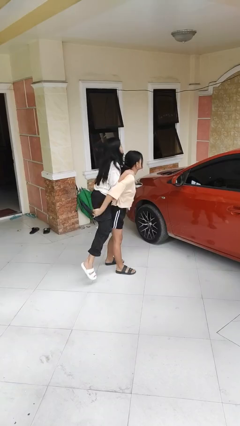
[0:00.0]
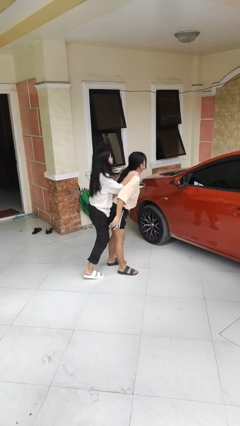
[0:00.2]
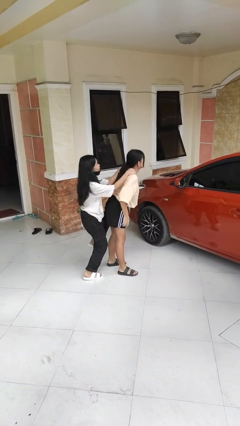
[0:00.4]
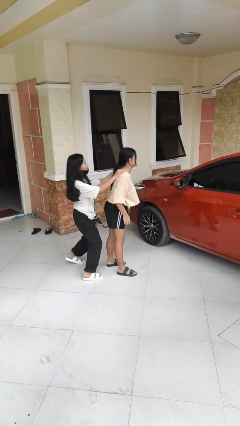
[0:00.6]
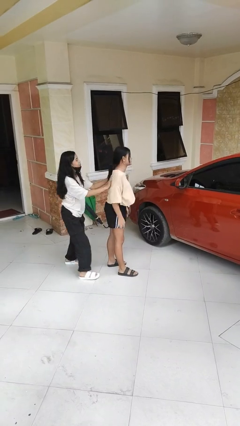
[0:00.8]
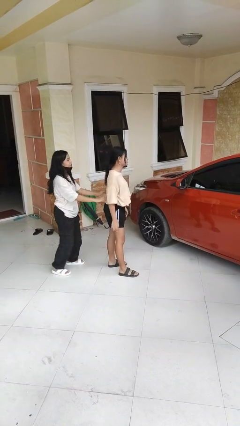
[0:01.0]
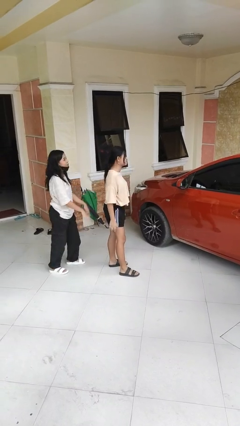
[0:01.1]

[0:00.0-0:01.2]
person puts down person

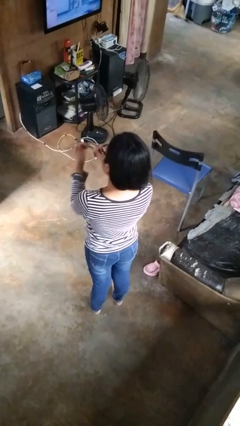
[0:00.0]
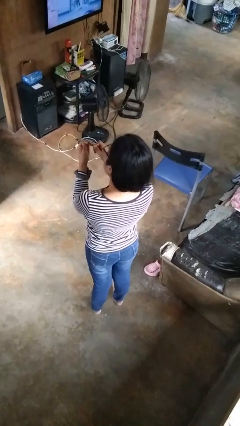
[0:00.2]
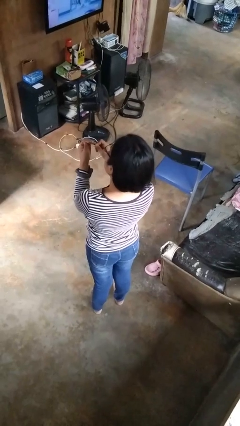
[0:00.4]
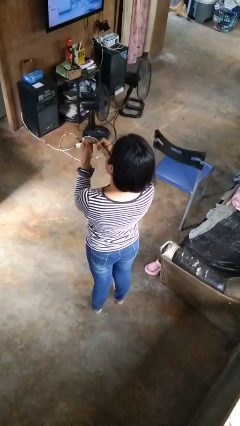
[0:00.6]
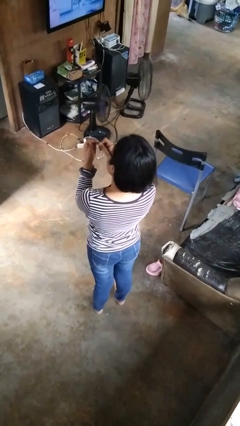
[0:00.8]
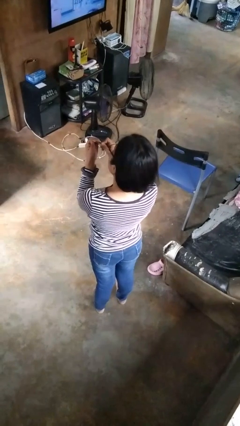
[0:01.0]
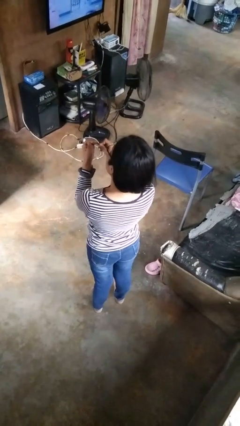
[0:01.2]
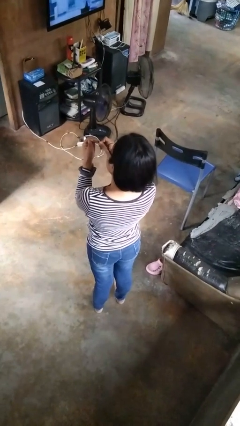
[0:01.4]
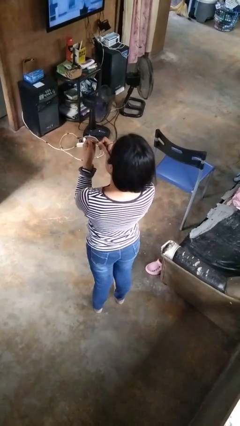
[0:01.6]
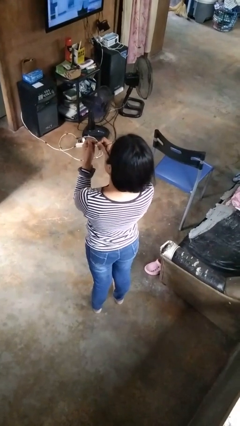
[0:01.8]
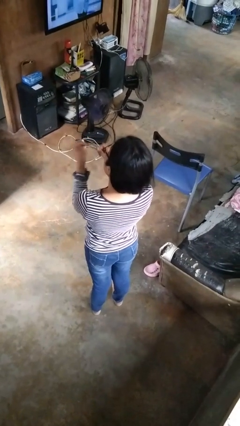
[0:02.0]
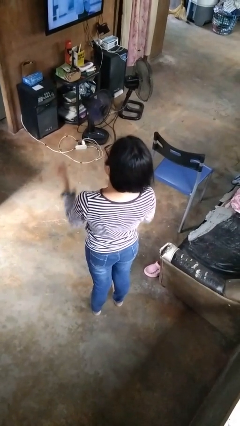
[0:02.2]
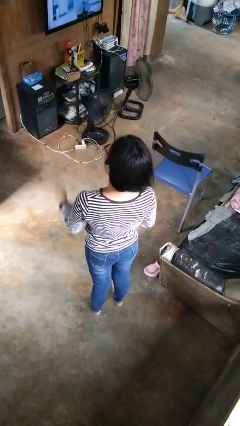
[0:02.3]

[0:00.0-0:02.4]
person files fingernails

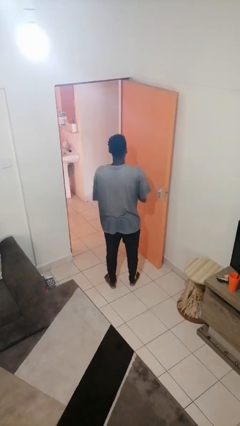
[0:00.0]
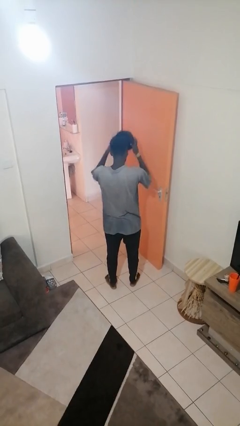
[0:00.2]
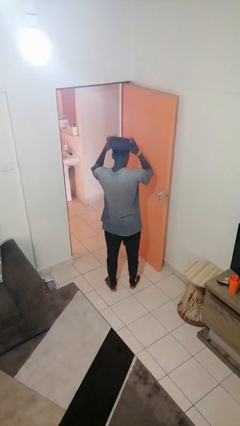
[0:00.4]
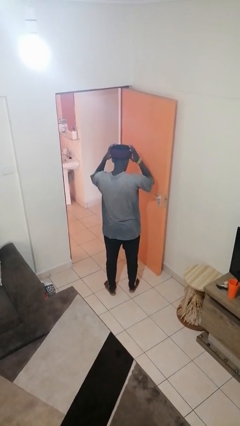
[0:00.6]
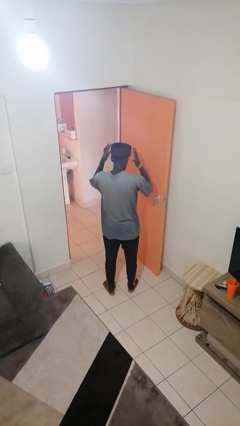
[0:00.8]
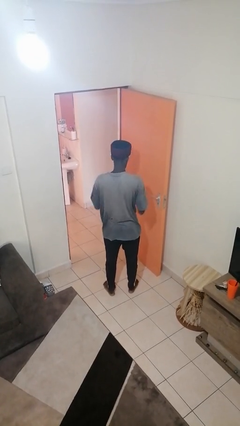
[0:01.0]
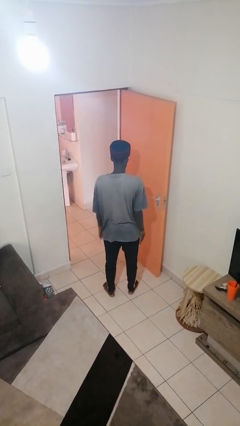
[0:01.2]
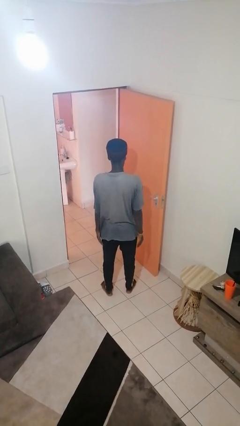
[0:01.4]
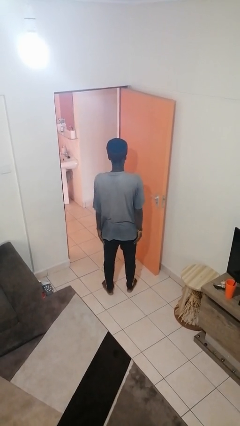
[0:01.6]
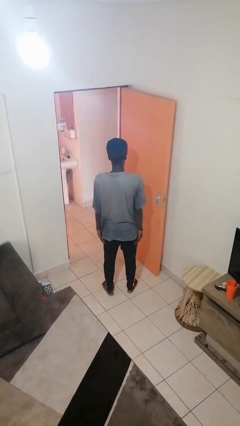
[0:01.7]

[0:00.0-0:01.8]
person puts on hat

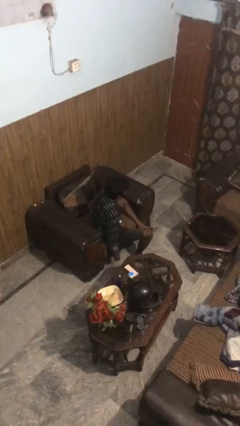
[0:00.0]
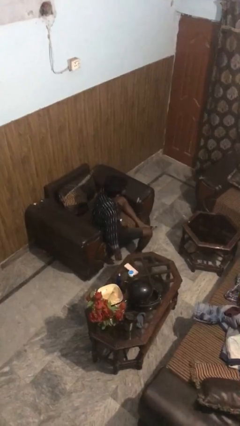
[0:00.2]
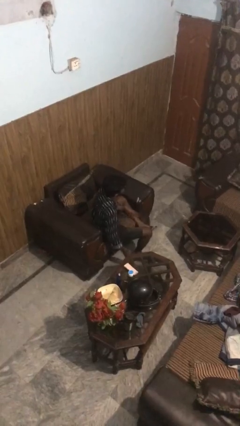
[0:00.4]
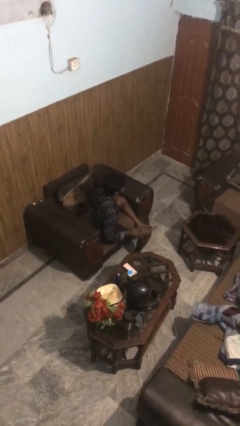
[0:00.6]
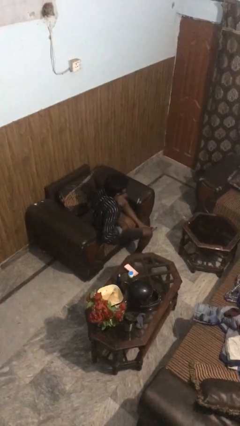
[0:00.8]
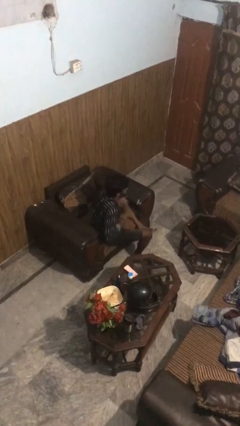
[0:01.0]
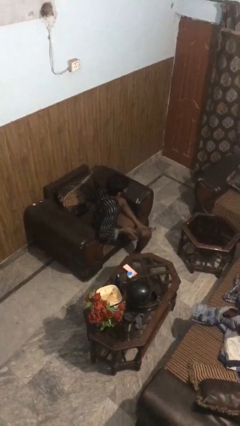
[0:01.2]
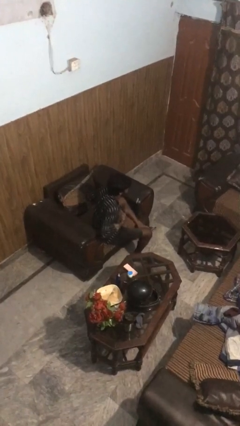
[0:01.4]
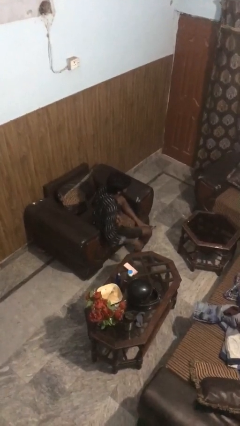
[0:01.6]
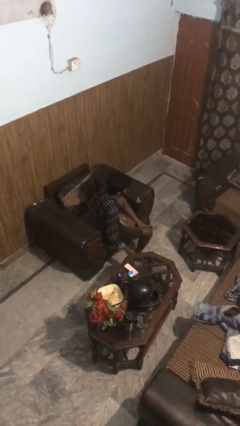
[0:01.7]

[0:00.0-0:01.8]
person drums on chest

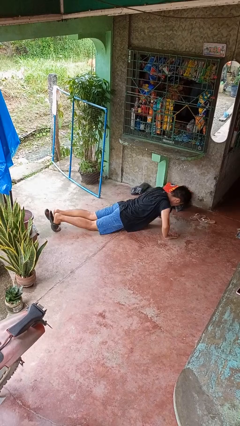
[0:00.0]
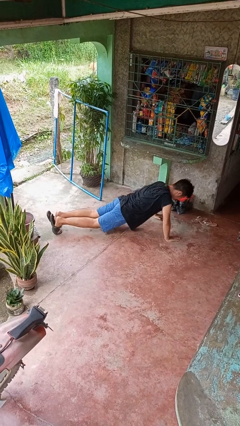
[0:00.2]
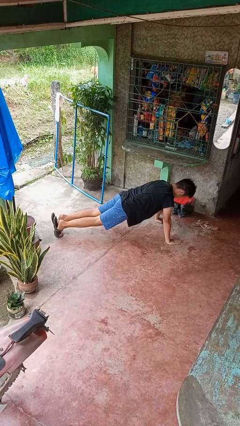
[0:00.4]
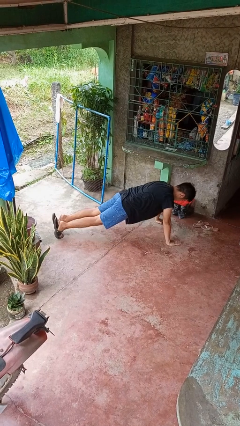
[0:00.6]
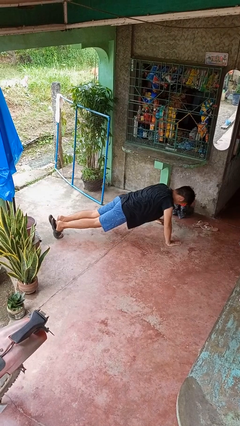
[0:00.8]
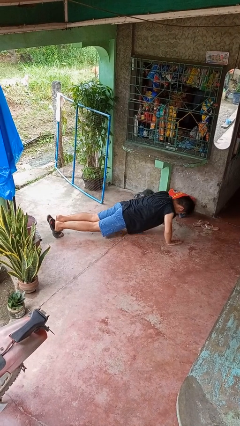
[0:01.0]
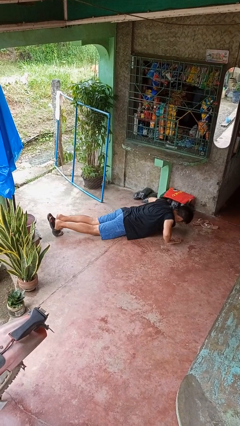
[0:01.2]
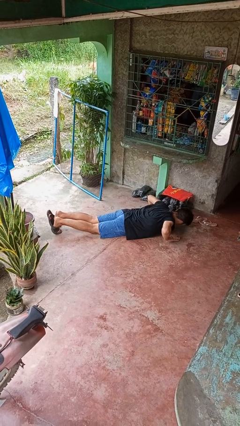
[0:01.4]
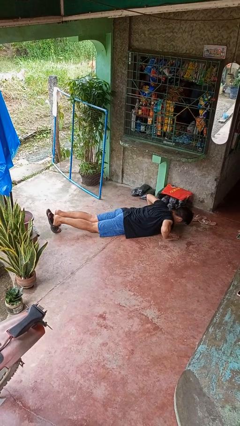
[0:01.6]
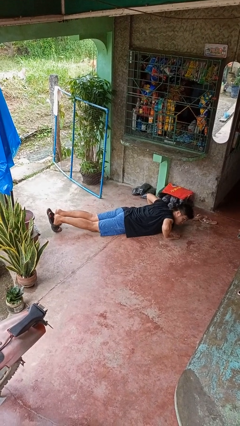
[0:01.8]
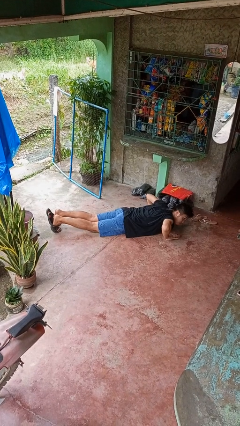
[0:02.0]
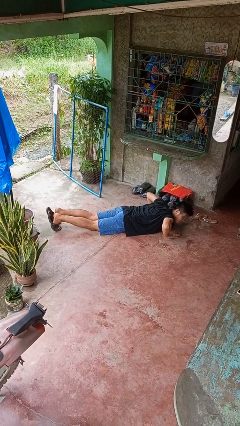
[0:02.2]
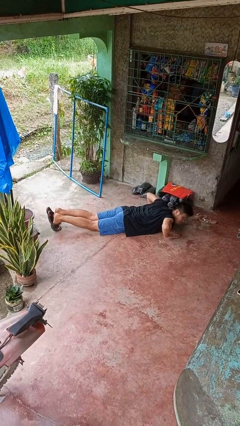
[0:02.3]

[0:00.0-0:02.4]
person exercises with pushup

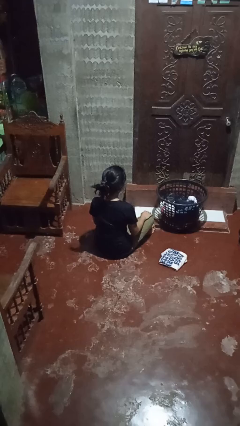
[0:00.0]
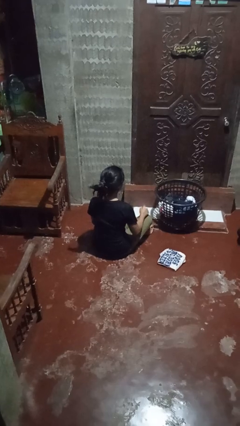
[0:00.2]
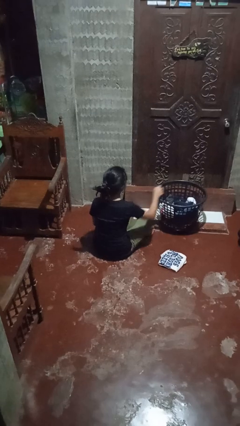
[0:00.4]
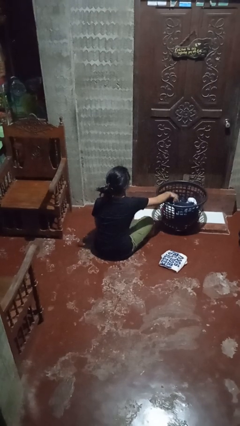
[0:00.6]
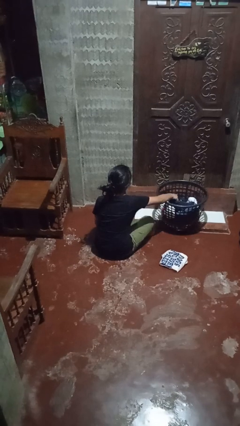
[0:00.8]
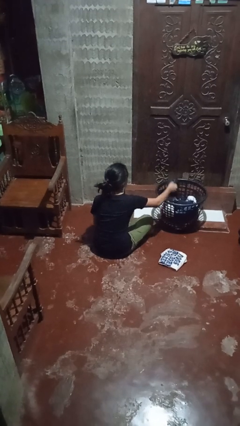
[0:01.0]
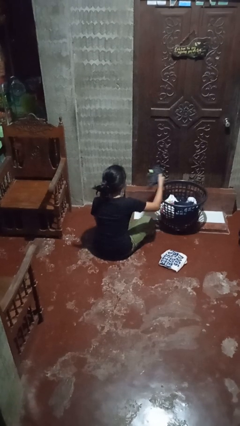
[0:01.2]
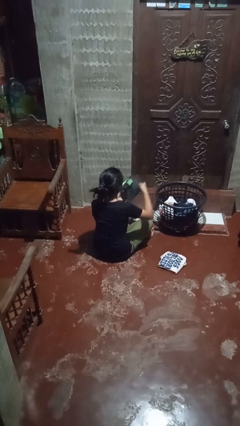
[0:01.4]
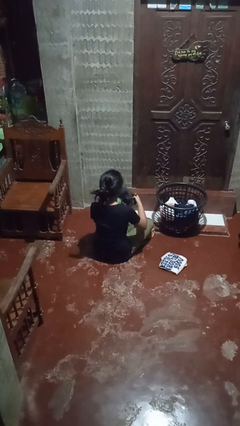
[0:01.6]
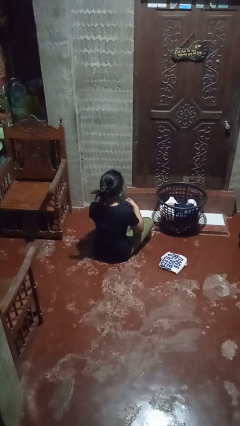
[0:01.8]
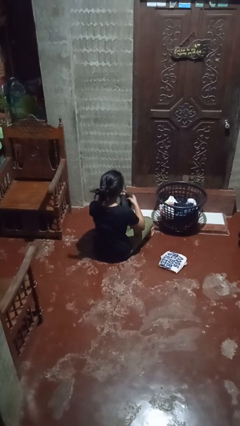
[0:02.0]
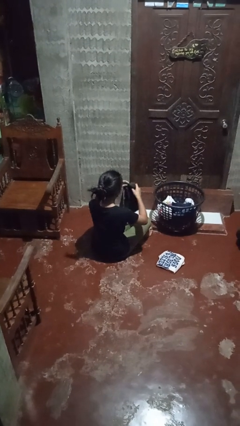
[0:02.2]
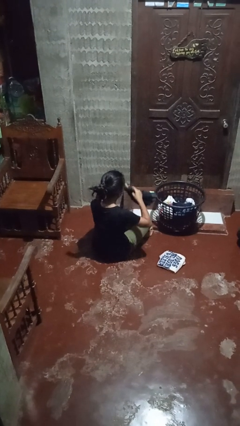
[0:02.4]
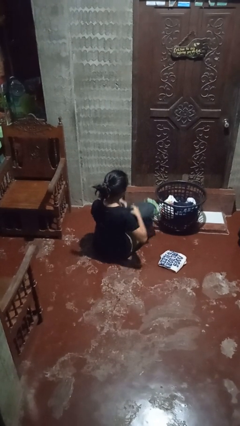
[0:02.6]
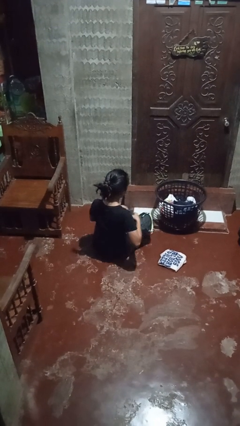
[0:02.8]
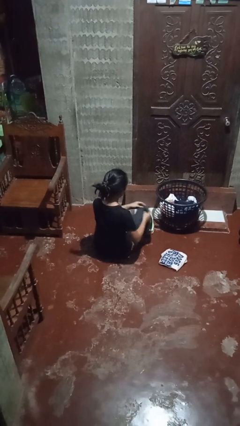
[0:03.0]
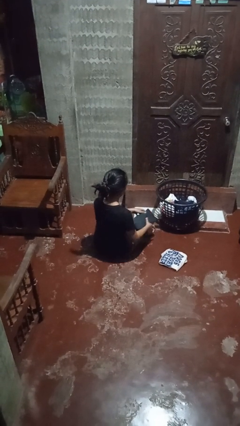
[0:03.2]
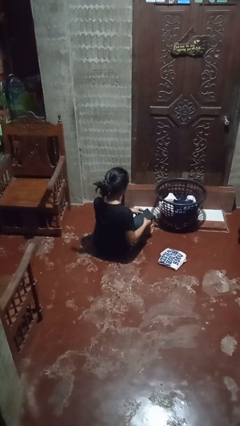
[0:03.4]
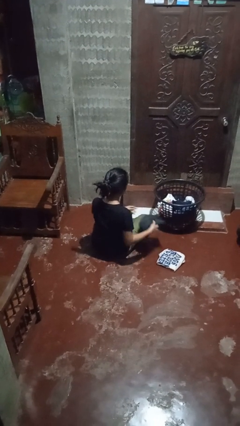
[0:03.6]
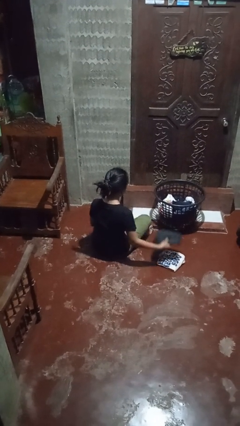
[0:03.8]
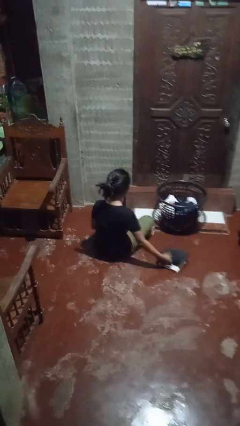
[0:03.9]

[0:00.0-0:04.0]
person folds shirt

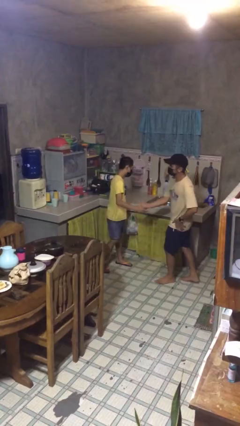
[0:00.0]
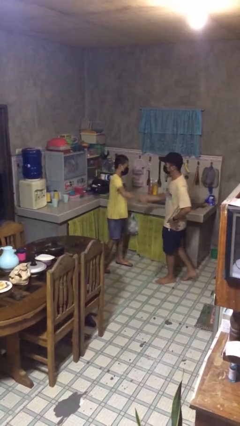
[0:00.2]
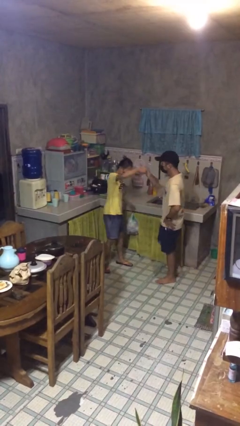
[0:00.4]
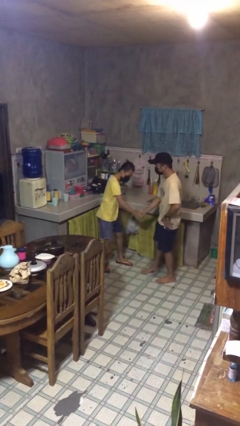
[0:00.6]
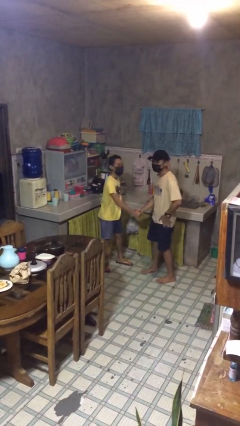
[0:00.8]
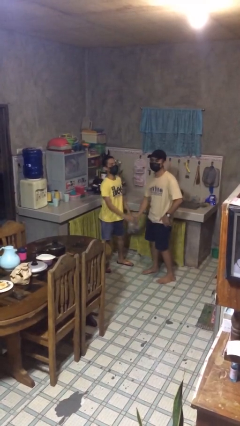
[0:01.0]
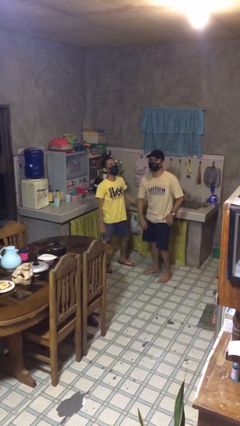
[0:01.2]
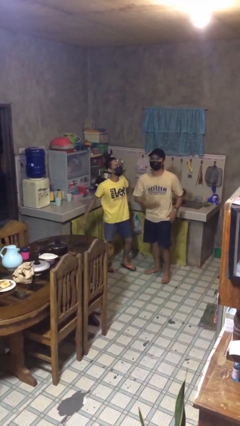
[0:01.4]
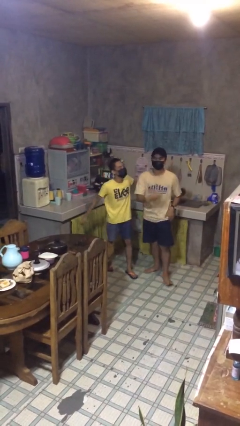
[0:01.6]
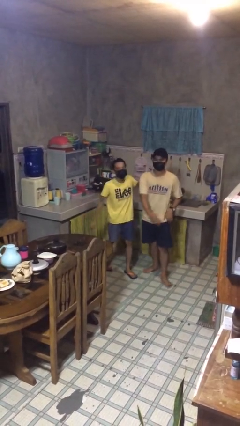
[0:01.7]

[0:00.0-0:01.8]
person shakes hand

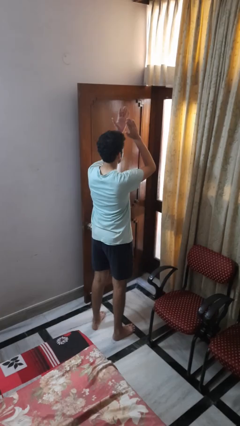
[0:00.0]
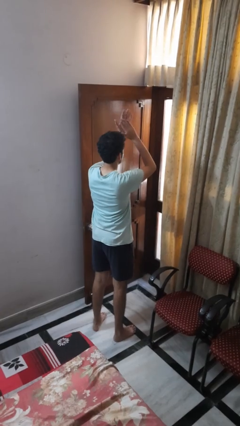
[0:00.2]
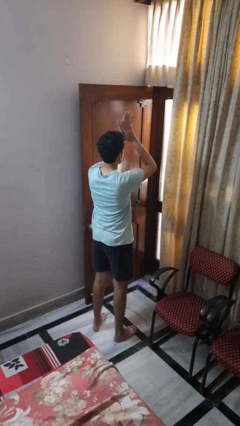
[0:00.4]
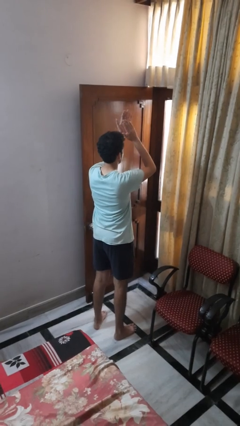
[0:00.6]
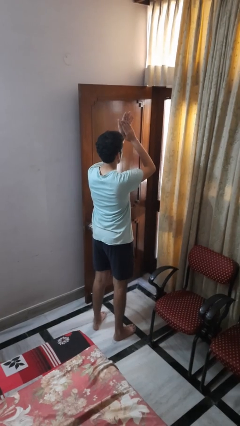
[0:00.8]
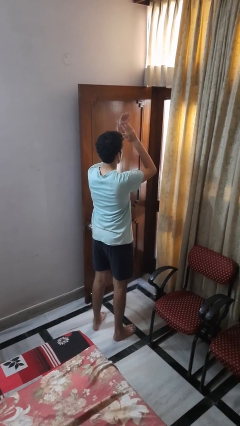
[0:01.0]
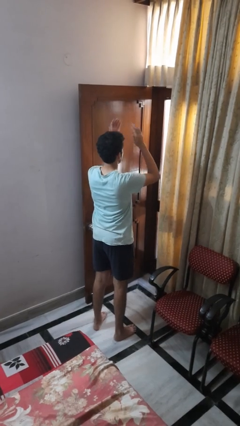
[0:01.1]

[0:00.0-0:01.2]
person claps hands
